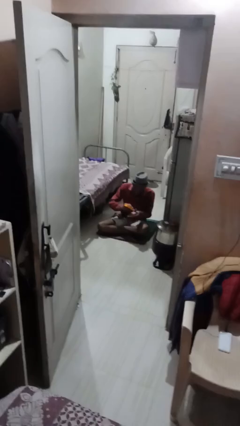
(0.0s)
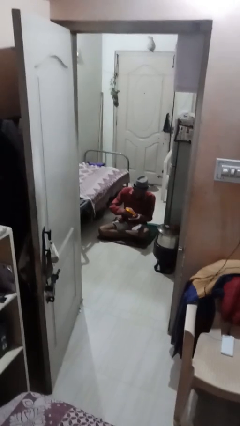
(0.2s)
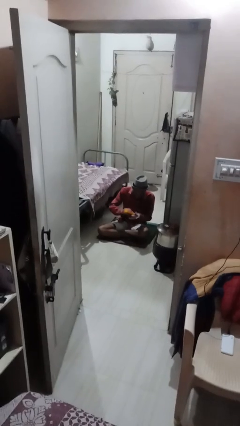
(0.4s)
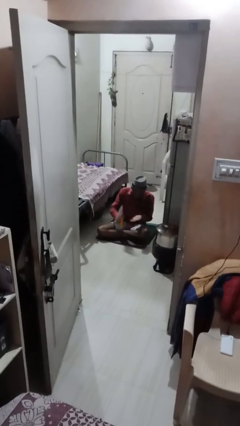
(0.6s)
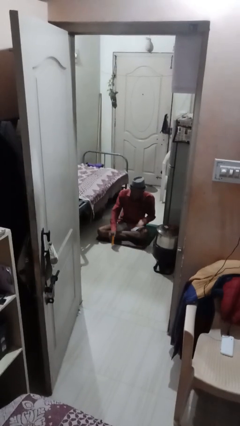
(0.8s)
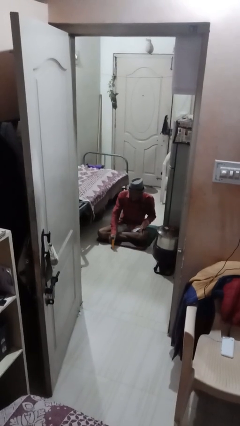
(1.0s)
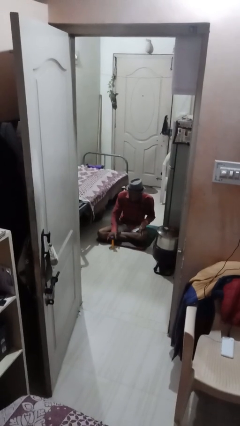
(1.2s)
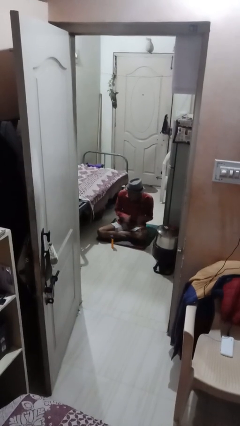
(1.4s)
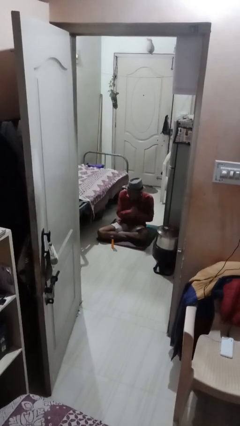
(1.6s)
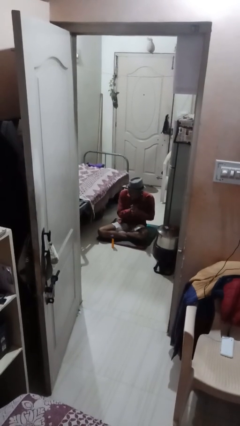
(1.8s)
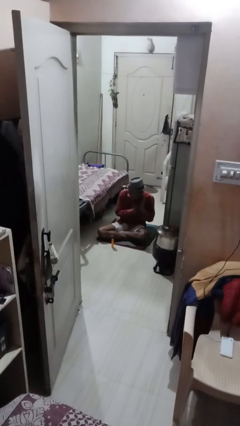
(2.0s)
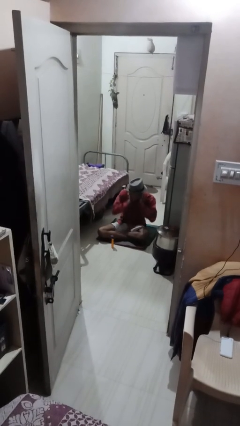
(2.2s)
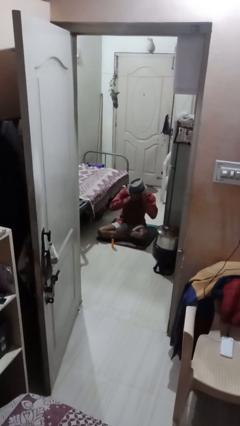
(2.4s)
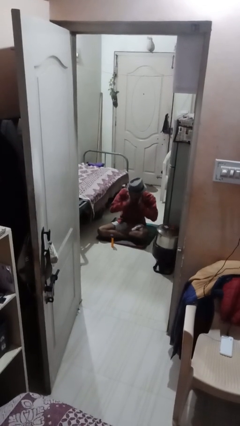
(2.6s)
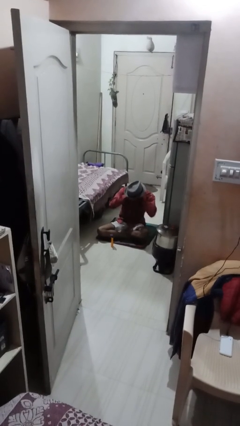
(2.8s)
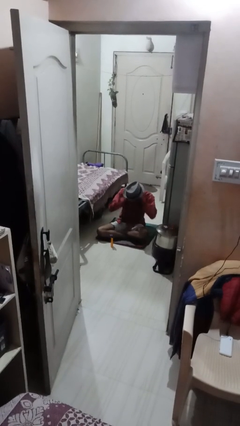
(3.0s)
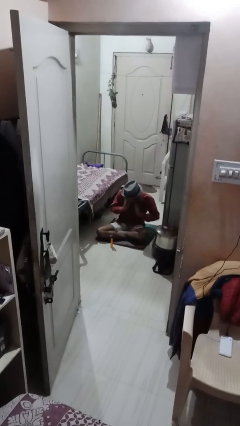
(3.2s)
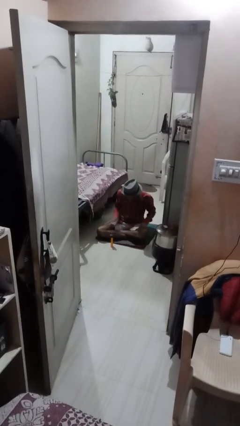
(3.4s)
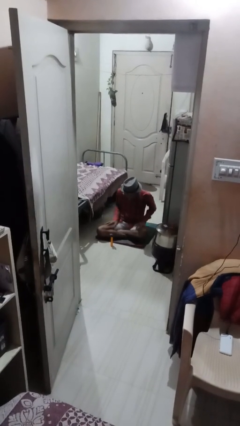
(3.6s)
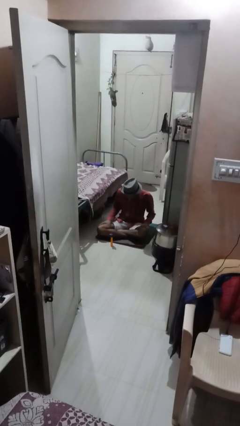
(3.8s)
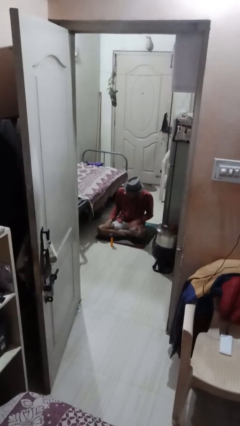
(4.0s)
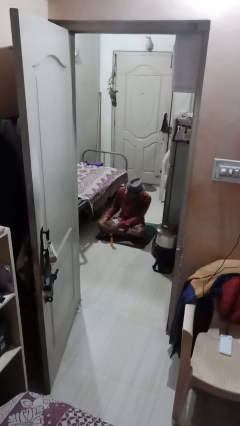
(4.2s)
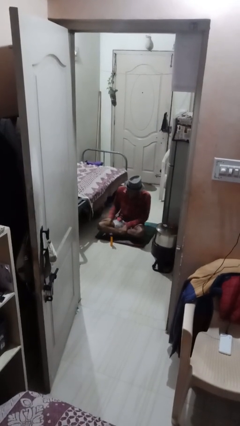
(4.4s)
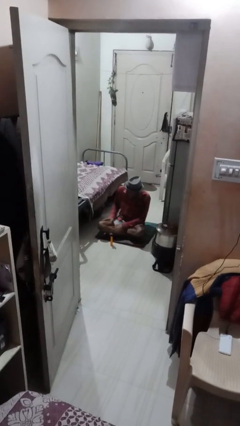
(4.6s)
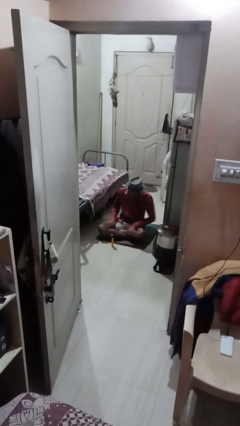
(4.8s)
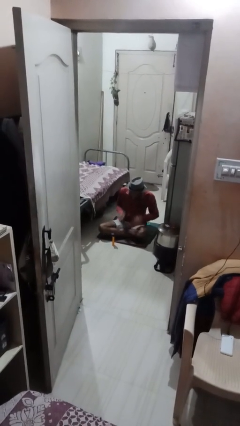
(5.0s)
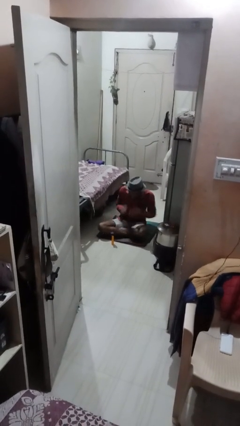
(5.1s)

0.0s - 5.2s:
person applies sunscreen

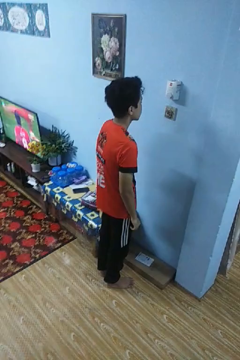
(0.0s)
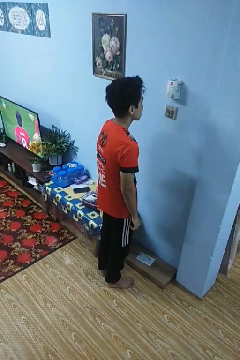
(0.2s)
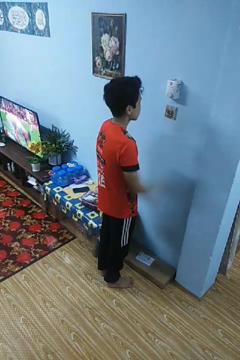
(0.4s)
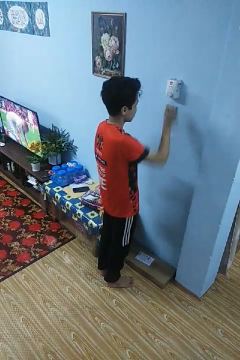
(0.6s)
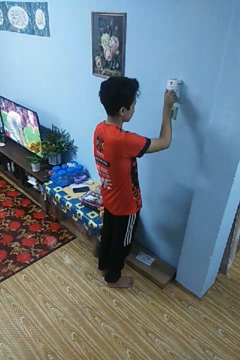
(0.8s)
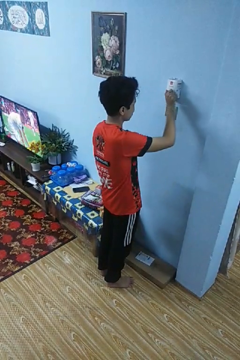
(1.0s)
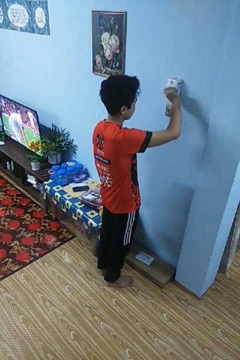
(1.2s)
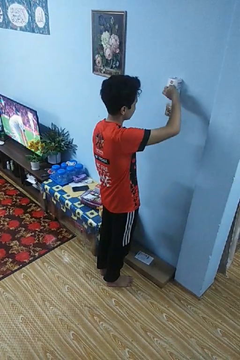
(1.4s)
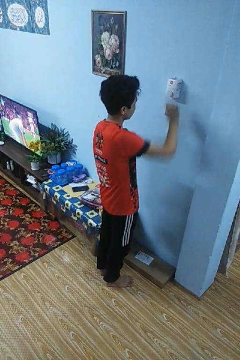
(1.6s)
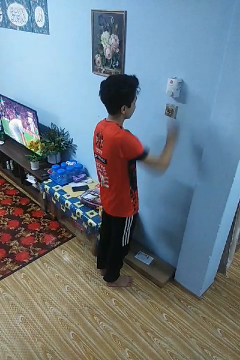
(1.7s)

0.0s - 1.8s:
person adjusts thermostat

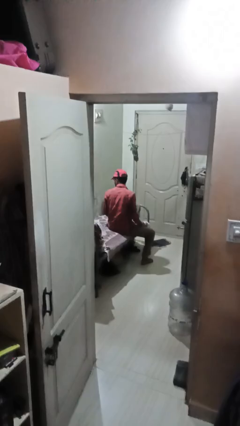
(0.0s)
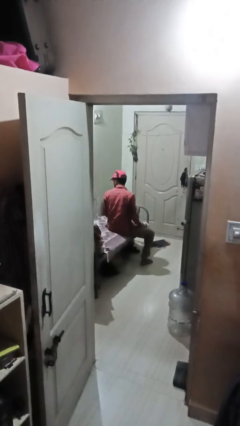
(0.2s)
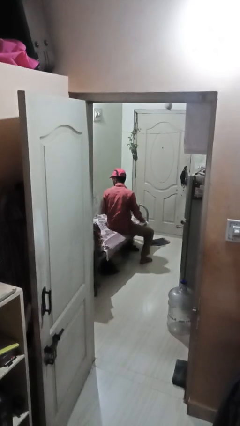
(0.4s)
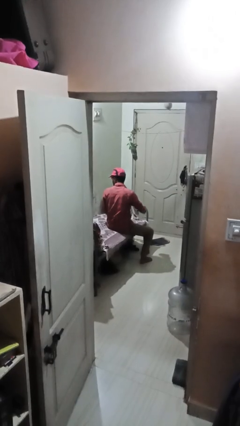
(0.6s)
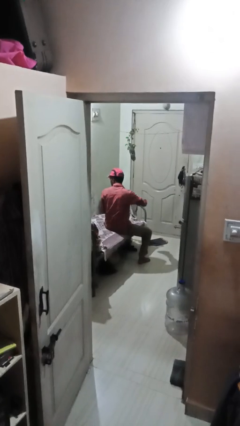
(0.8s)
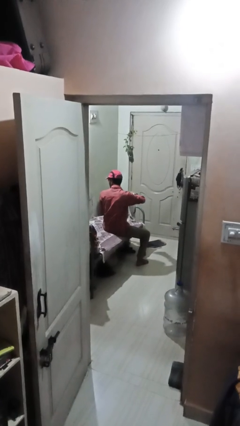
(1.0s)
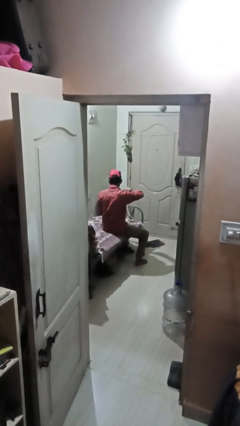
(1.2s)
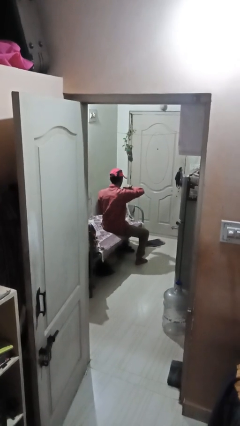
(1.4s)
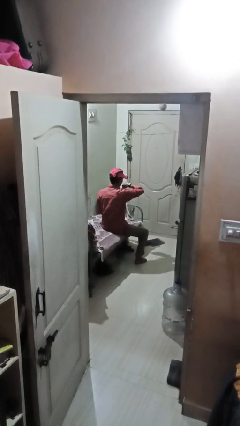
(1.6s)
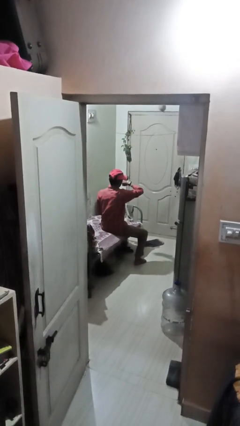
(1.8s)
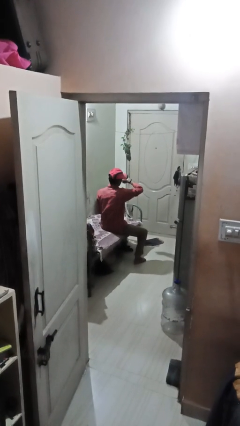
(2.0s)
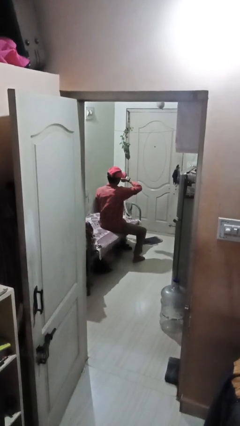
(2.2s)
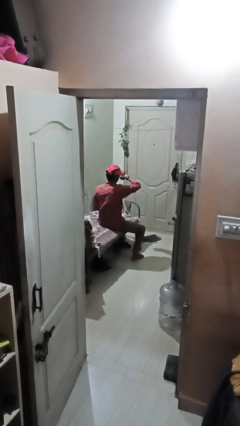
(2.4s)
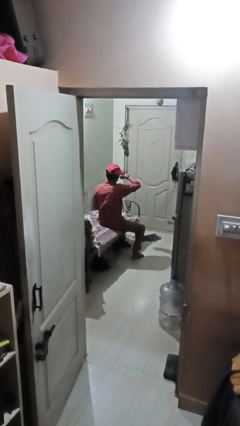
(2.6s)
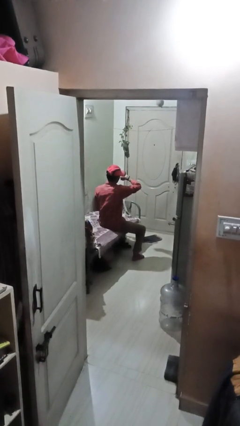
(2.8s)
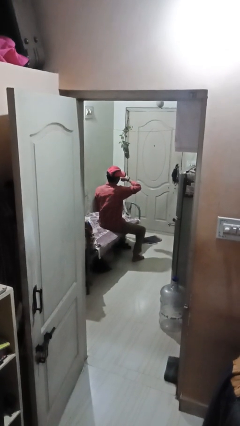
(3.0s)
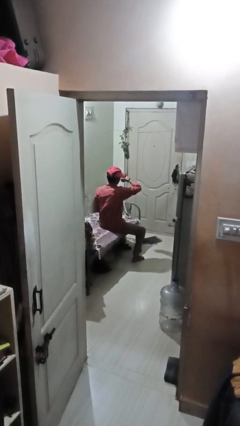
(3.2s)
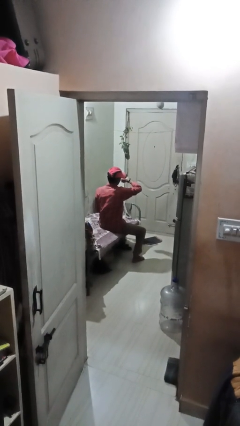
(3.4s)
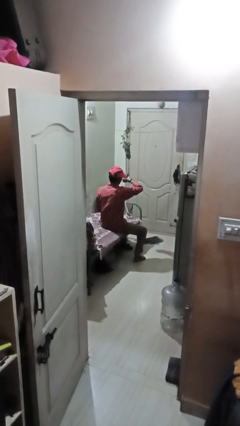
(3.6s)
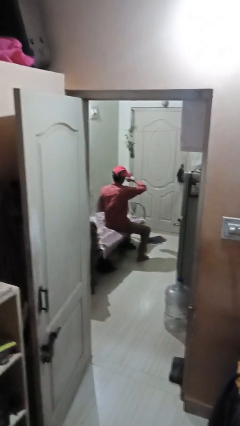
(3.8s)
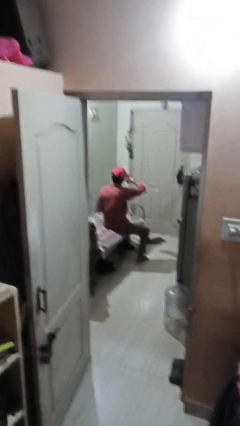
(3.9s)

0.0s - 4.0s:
person looks at wristwatch

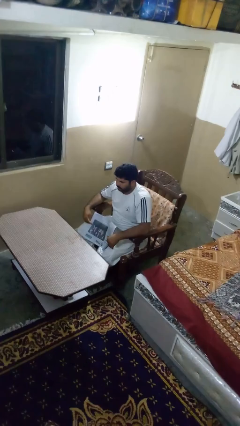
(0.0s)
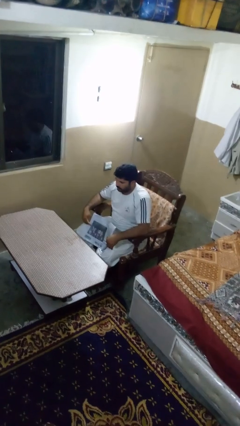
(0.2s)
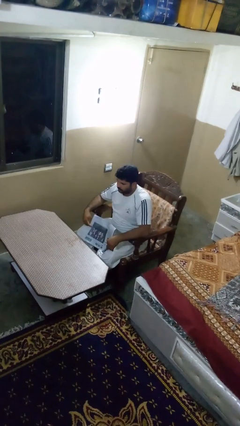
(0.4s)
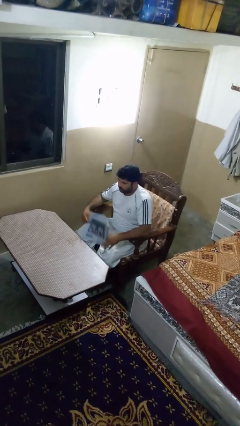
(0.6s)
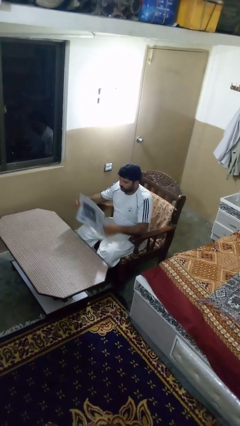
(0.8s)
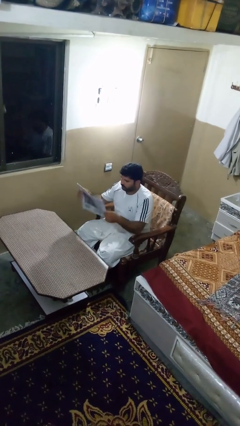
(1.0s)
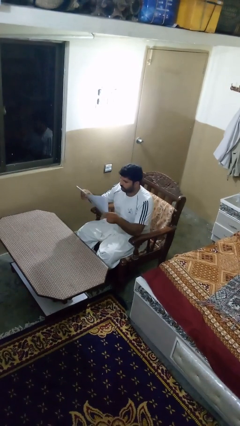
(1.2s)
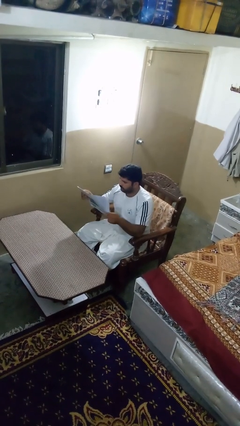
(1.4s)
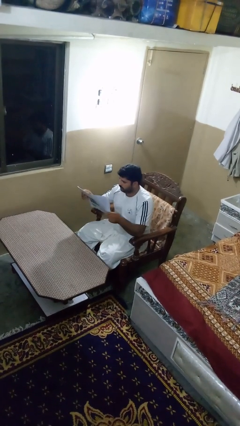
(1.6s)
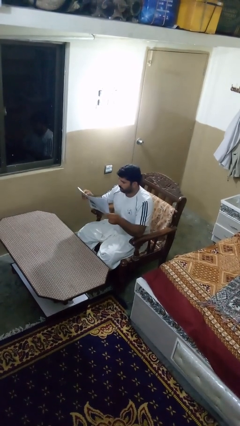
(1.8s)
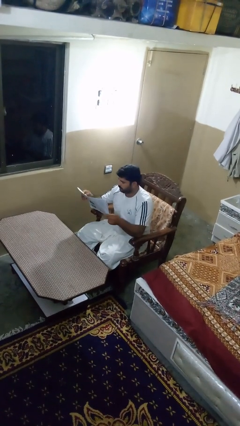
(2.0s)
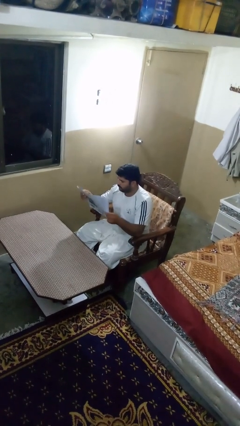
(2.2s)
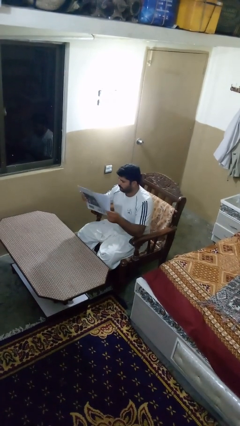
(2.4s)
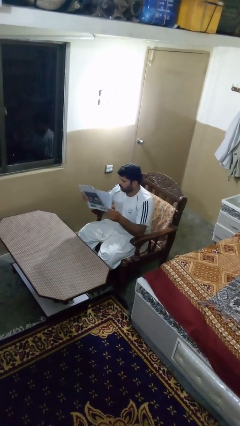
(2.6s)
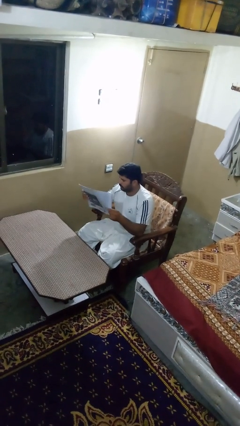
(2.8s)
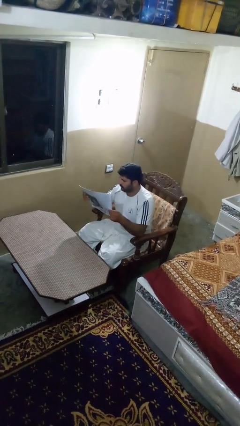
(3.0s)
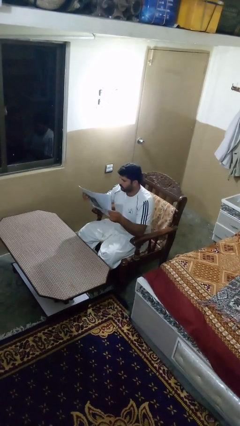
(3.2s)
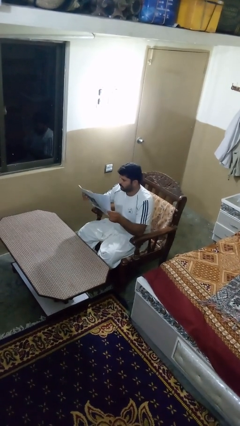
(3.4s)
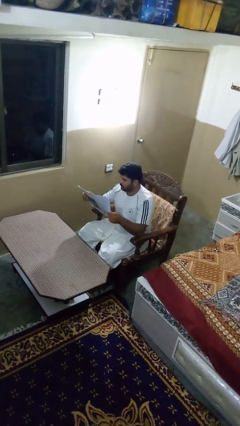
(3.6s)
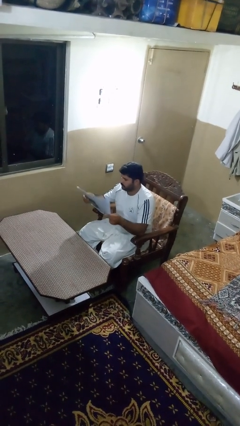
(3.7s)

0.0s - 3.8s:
person reads newspaper

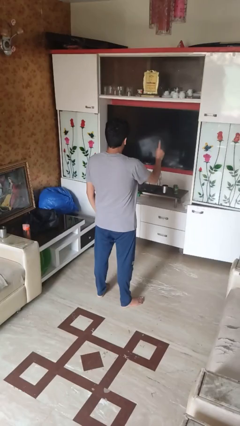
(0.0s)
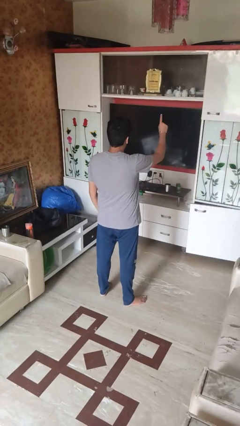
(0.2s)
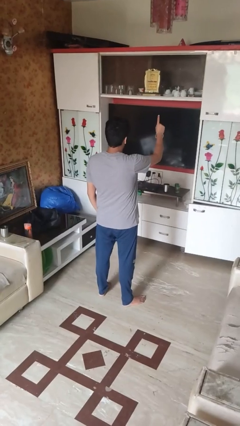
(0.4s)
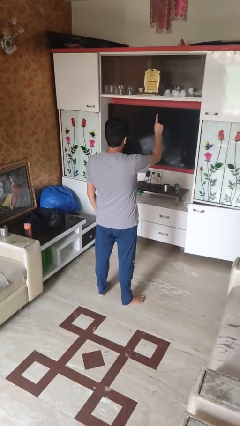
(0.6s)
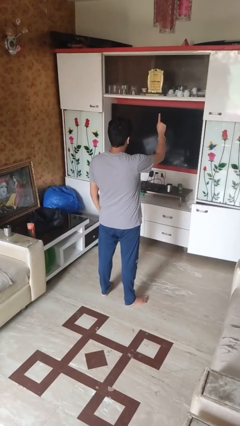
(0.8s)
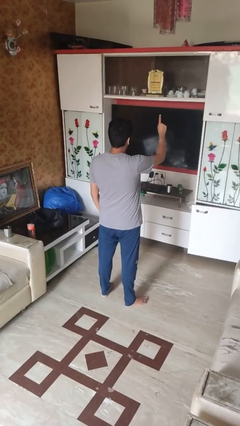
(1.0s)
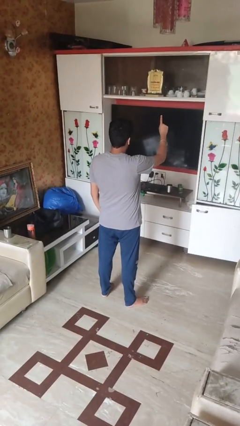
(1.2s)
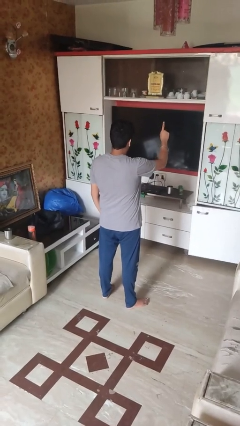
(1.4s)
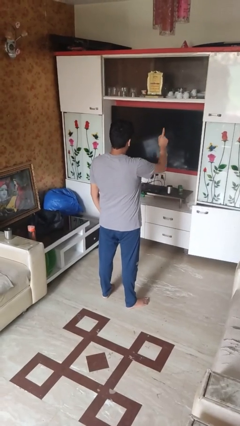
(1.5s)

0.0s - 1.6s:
person gestures number one

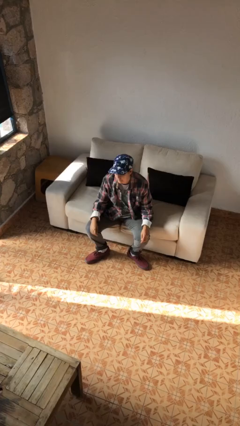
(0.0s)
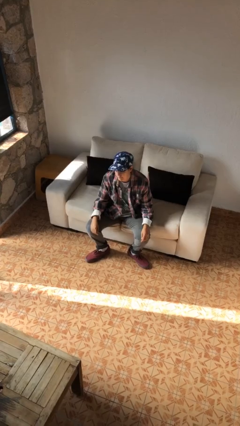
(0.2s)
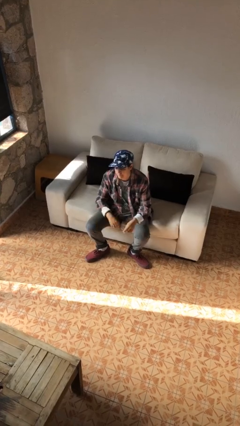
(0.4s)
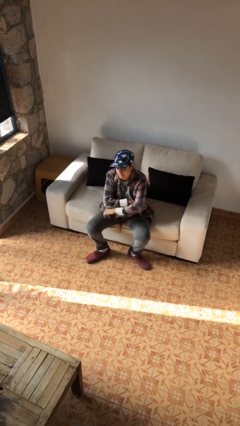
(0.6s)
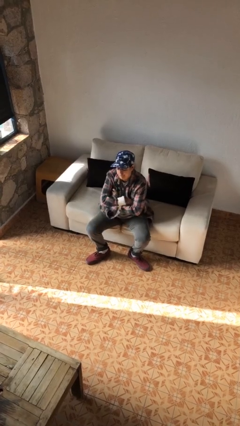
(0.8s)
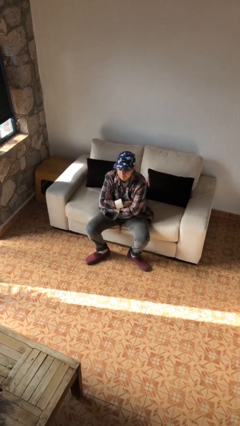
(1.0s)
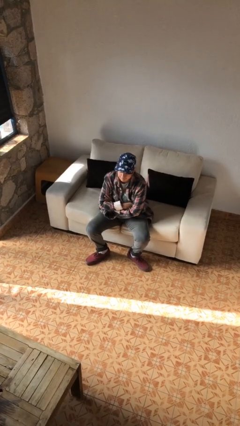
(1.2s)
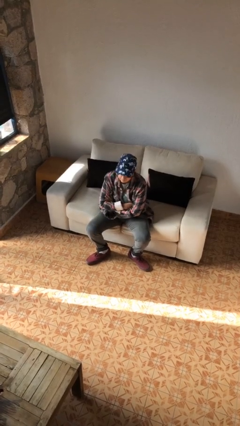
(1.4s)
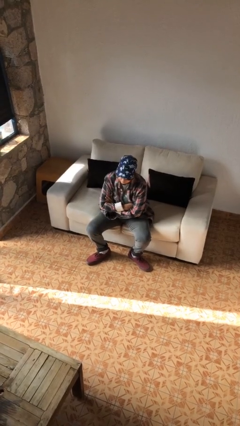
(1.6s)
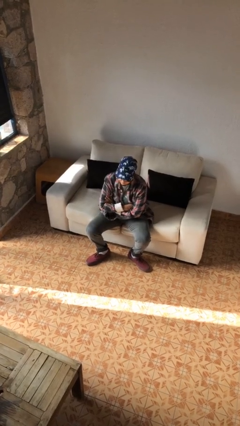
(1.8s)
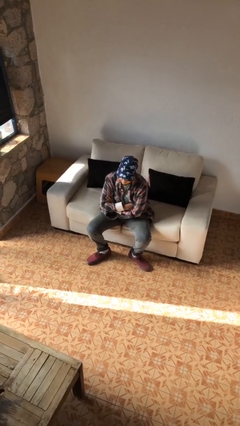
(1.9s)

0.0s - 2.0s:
person crosses arms
